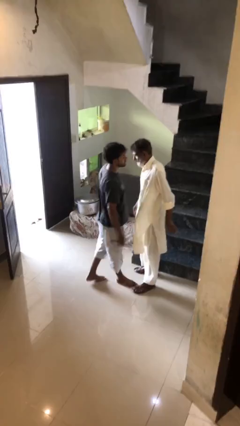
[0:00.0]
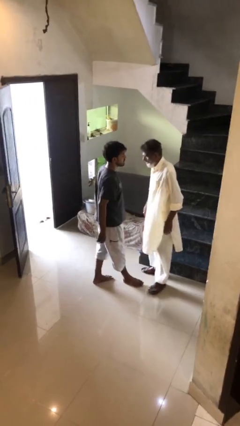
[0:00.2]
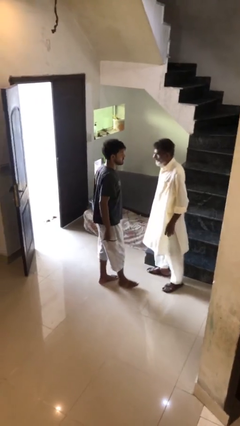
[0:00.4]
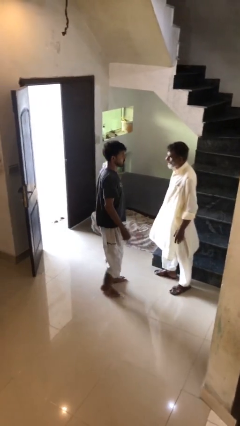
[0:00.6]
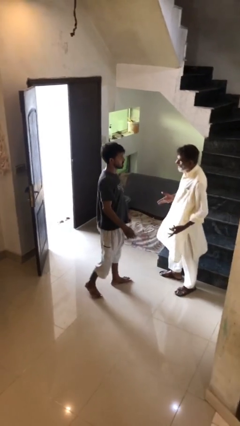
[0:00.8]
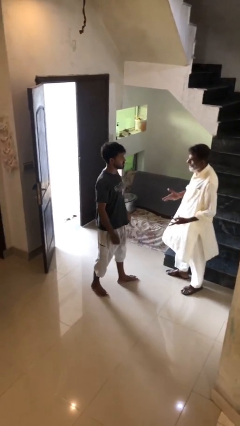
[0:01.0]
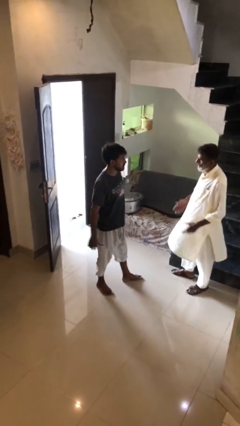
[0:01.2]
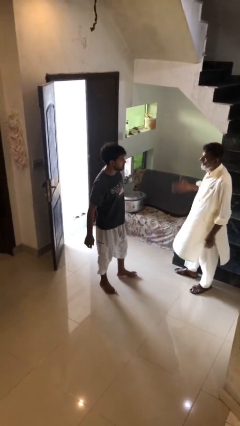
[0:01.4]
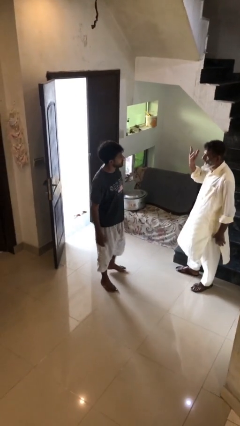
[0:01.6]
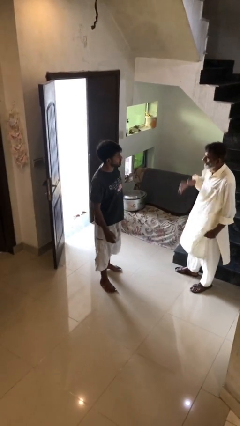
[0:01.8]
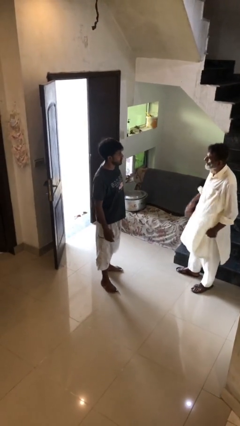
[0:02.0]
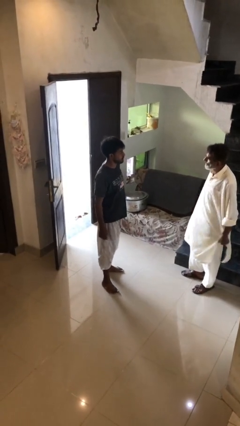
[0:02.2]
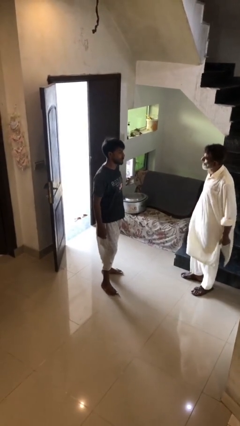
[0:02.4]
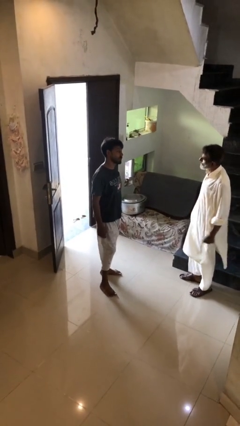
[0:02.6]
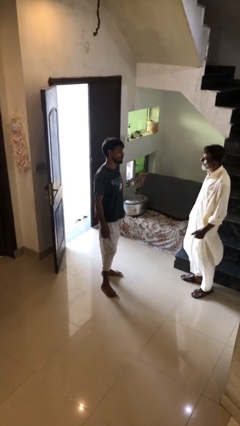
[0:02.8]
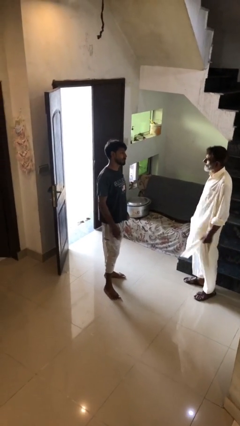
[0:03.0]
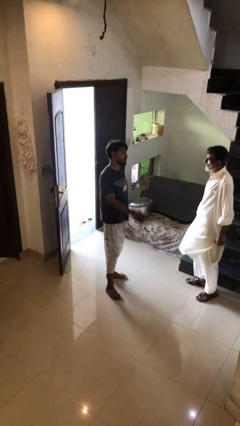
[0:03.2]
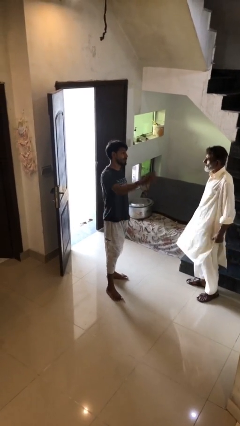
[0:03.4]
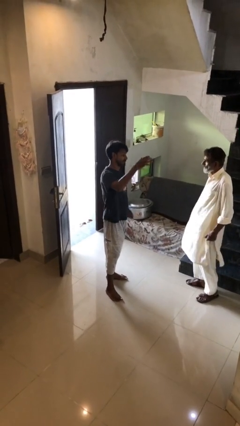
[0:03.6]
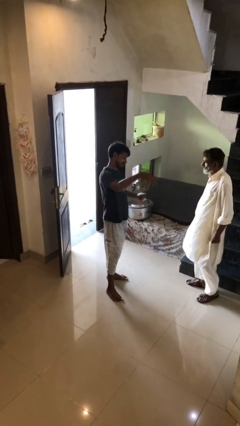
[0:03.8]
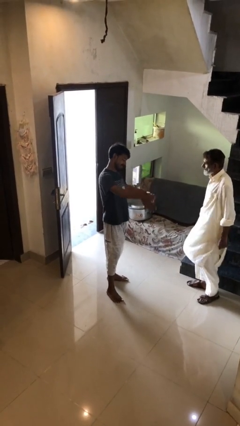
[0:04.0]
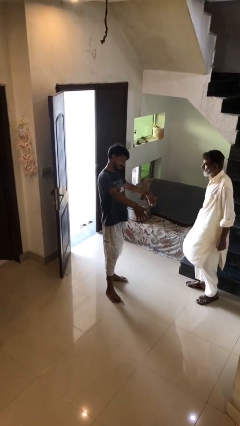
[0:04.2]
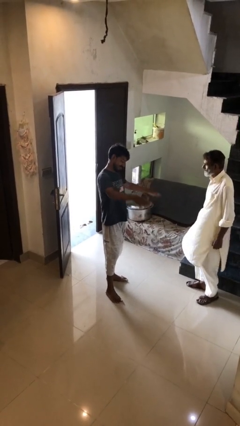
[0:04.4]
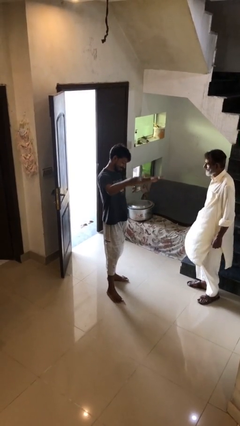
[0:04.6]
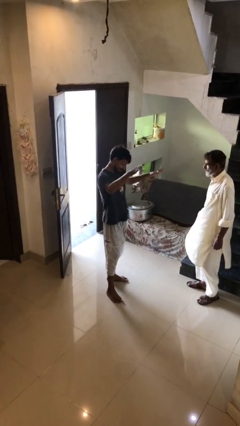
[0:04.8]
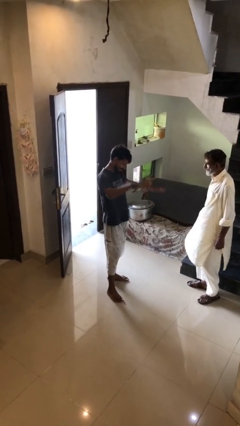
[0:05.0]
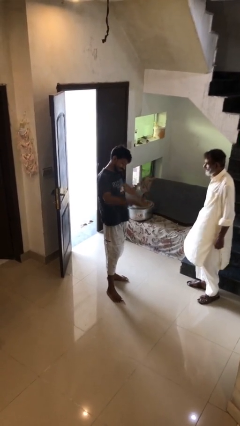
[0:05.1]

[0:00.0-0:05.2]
person talks to person

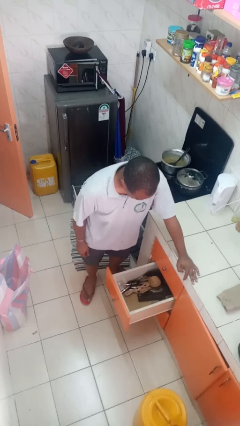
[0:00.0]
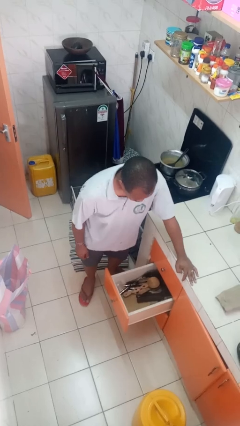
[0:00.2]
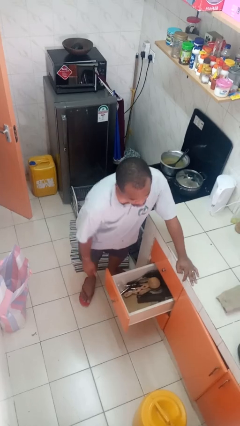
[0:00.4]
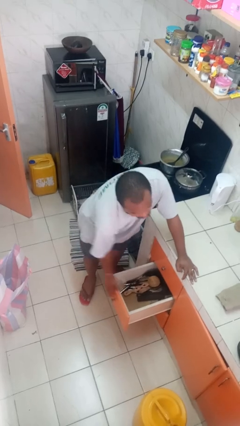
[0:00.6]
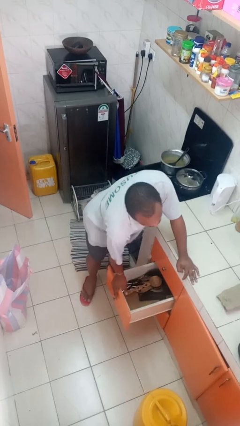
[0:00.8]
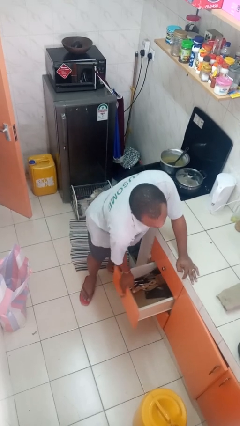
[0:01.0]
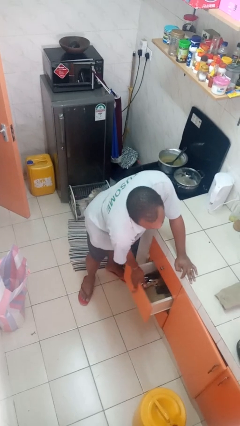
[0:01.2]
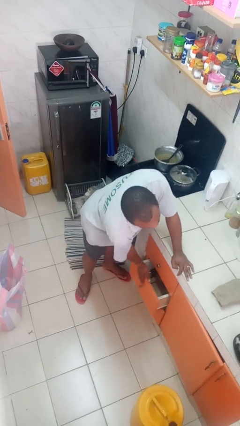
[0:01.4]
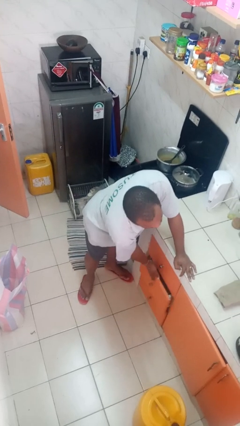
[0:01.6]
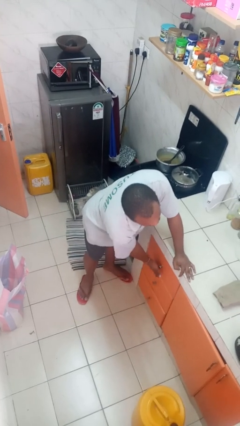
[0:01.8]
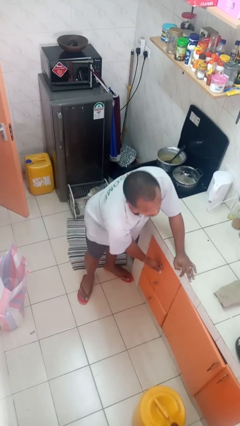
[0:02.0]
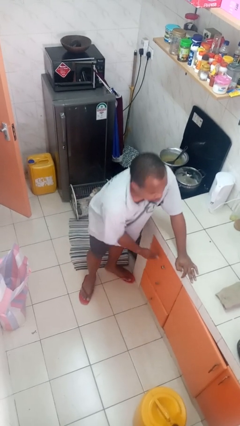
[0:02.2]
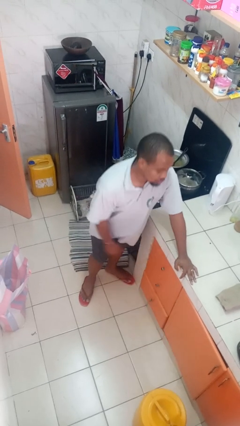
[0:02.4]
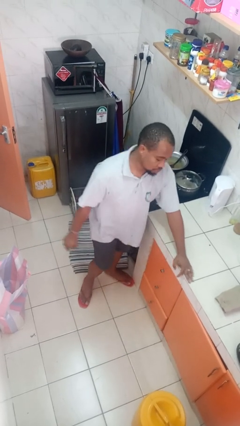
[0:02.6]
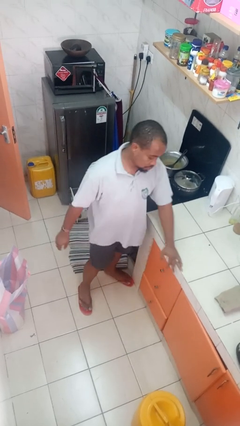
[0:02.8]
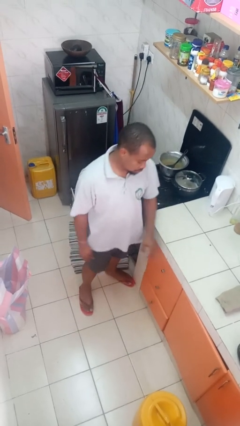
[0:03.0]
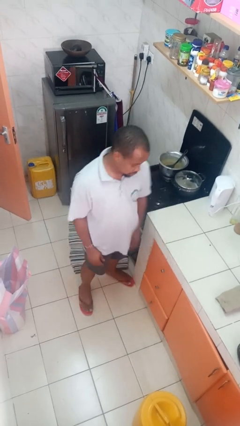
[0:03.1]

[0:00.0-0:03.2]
person closes kitchen drawer

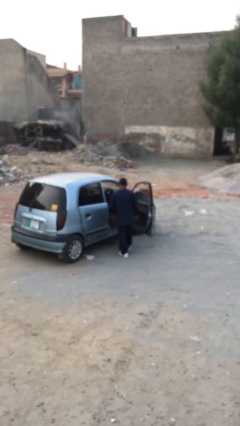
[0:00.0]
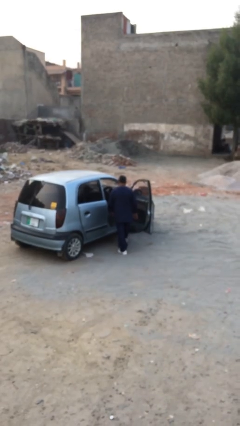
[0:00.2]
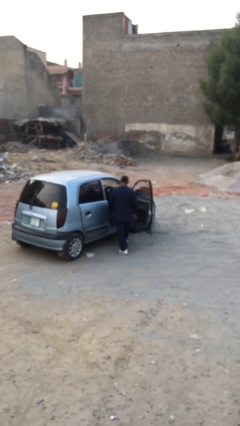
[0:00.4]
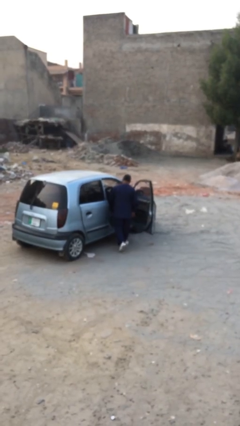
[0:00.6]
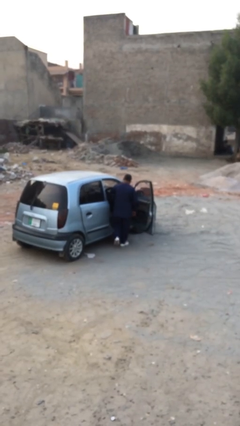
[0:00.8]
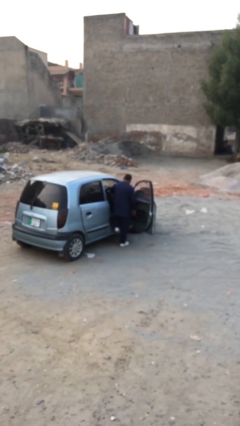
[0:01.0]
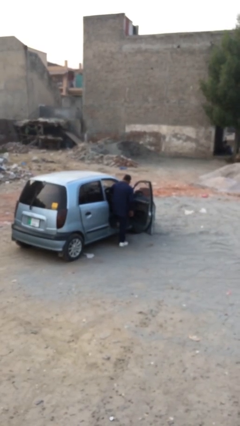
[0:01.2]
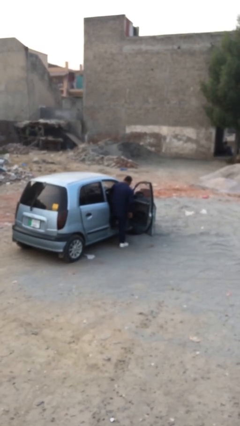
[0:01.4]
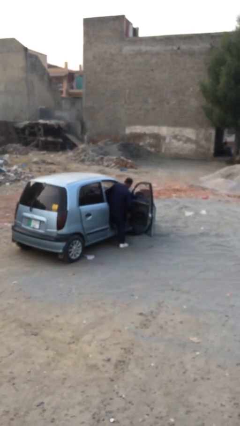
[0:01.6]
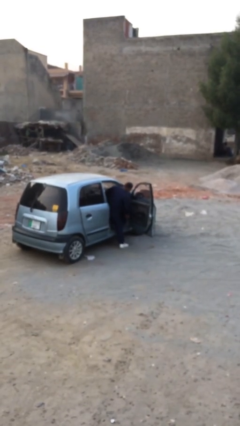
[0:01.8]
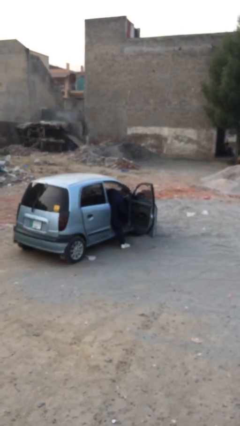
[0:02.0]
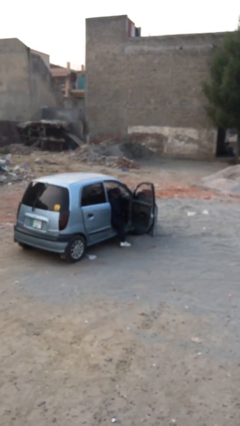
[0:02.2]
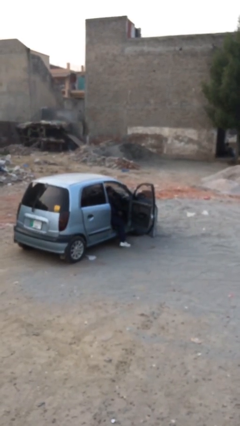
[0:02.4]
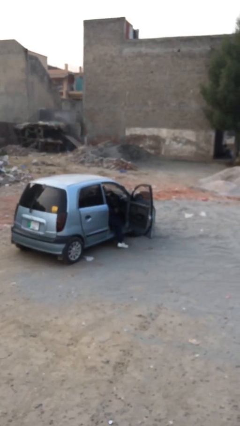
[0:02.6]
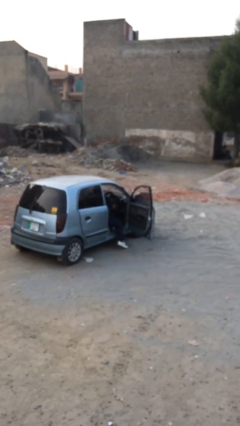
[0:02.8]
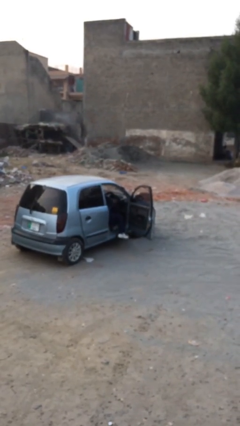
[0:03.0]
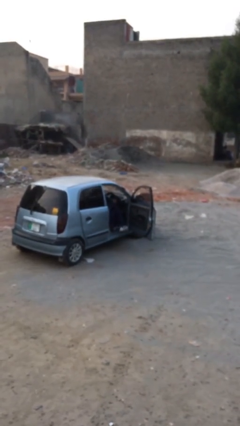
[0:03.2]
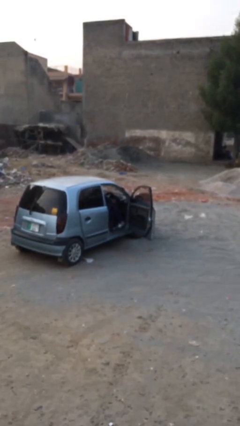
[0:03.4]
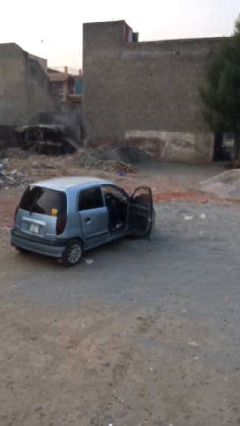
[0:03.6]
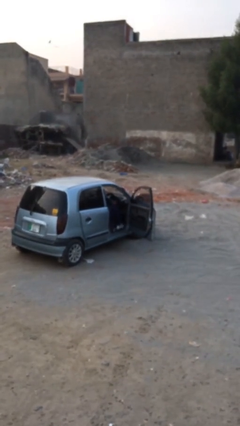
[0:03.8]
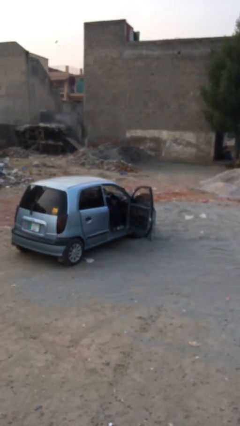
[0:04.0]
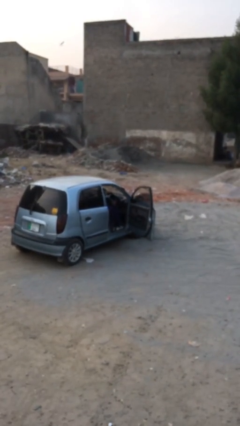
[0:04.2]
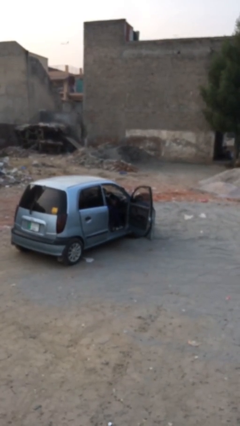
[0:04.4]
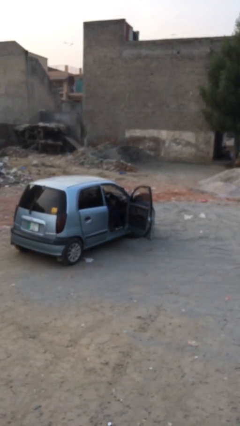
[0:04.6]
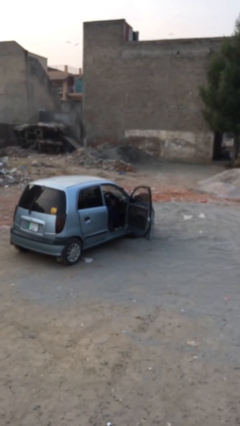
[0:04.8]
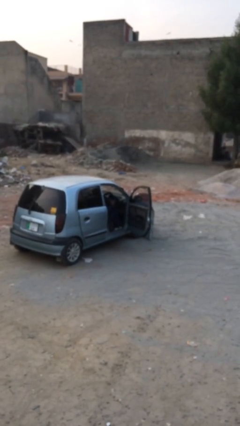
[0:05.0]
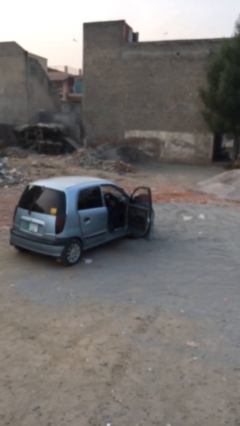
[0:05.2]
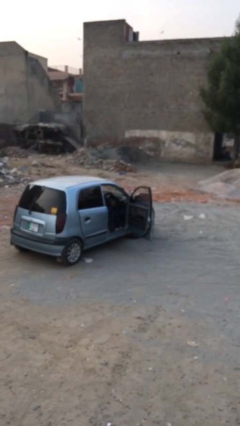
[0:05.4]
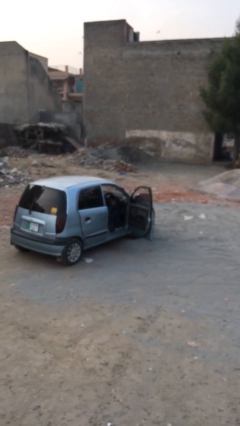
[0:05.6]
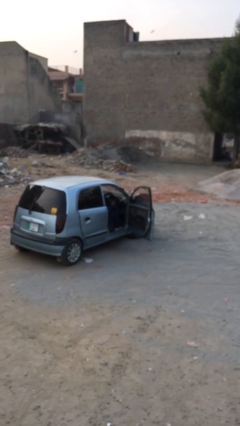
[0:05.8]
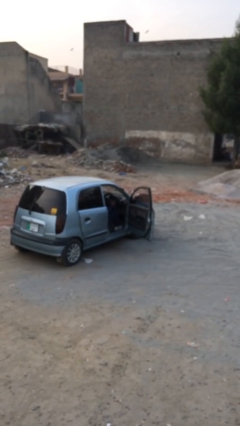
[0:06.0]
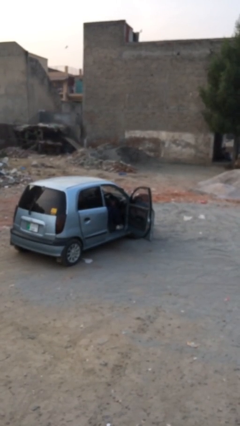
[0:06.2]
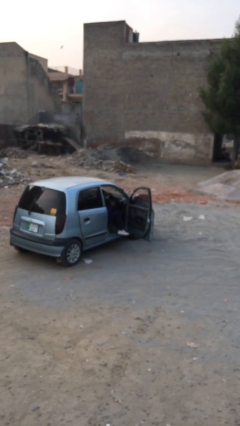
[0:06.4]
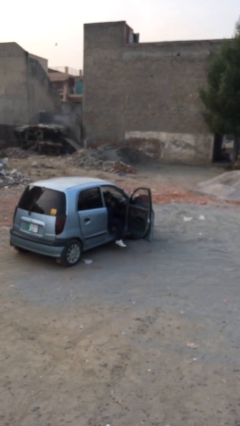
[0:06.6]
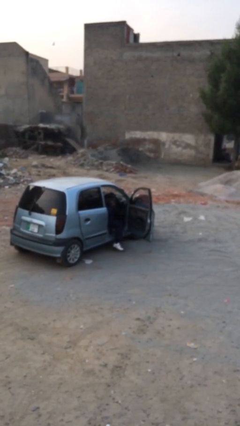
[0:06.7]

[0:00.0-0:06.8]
person enters car

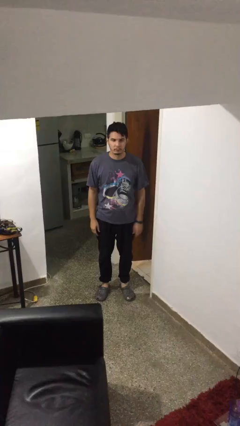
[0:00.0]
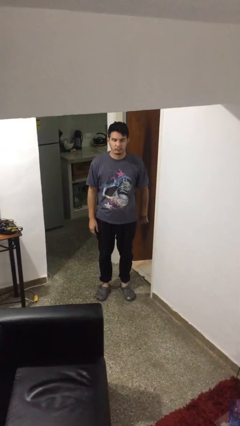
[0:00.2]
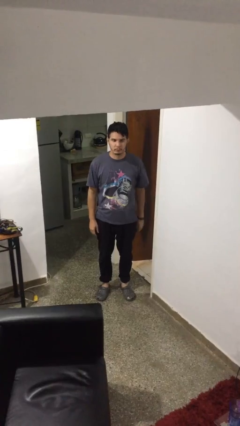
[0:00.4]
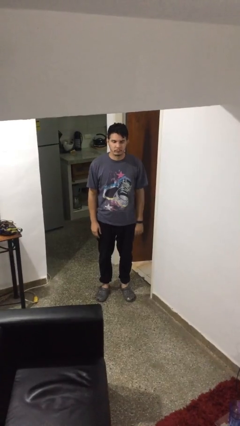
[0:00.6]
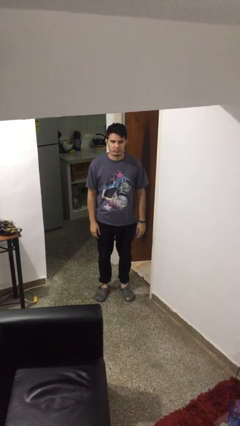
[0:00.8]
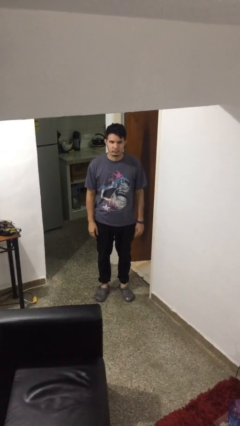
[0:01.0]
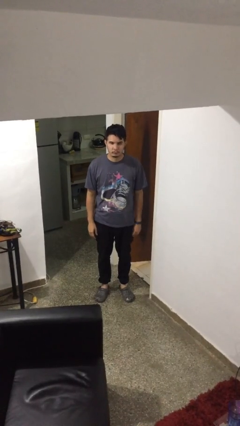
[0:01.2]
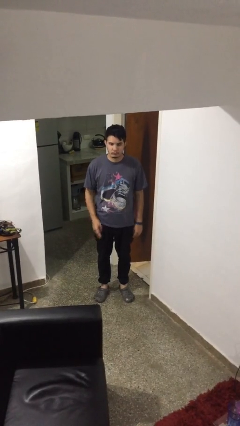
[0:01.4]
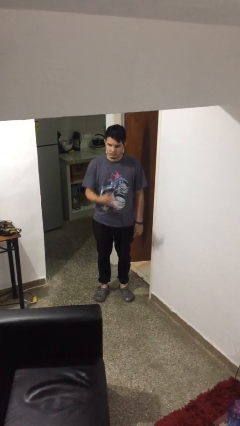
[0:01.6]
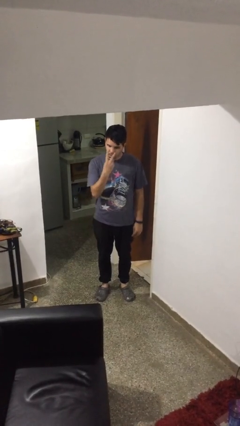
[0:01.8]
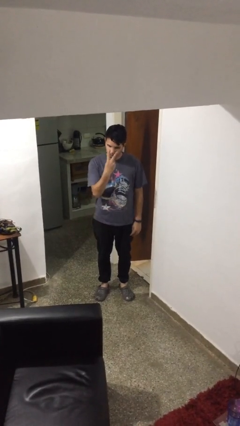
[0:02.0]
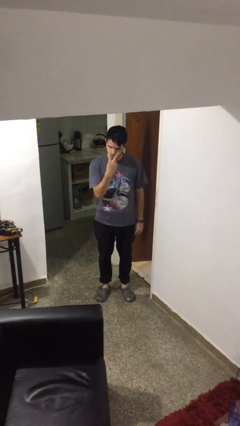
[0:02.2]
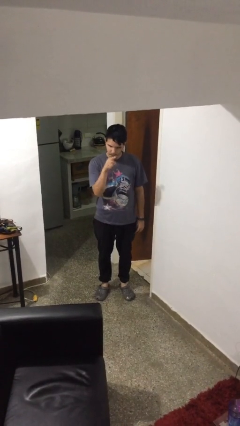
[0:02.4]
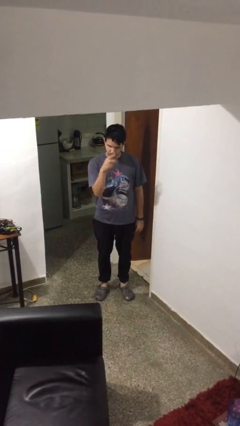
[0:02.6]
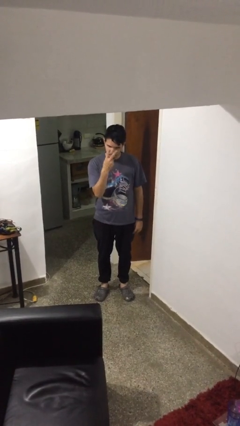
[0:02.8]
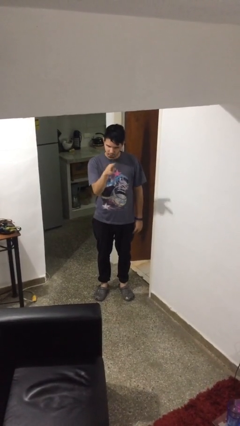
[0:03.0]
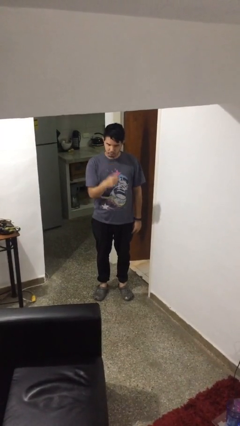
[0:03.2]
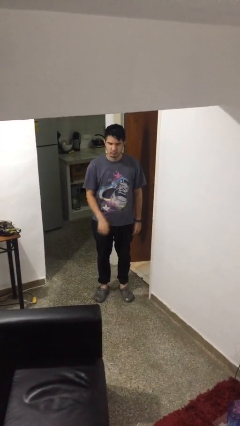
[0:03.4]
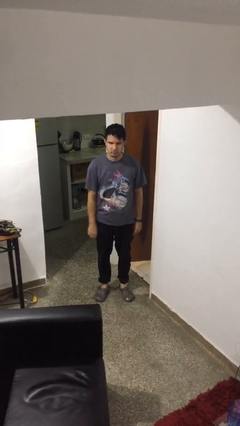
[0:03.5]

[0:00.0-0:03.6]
person gestures watch closely
